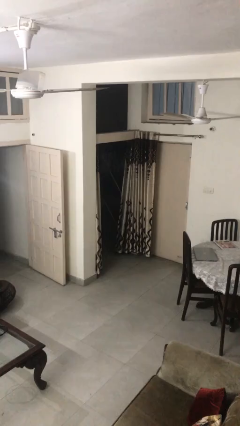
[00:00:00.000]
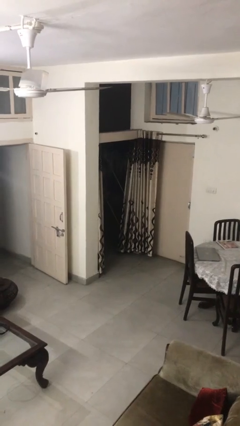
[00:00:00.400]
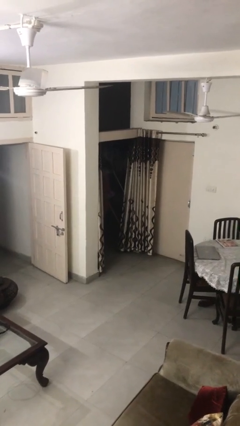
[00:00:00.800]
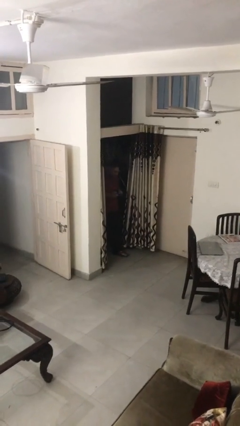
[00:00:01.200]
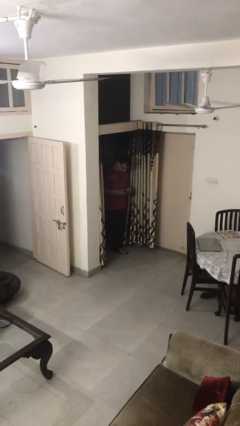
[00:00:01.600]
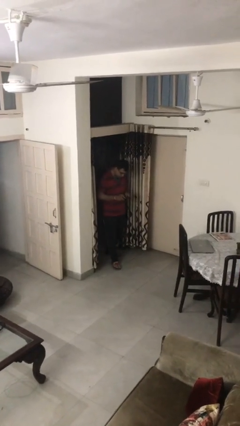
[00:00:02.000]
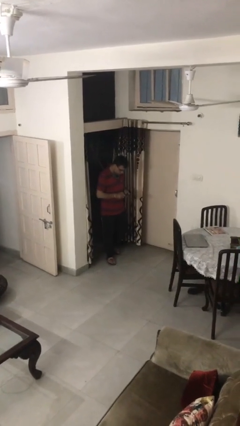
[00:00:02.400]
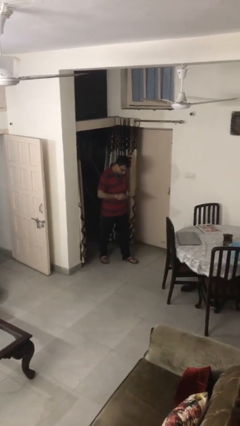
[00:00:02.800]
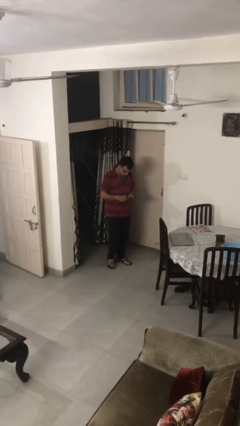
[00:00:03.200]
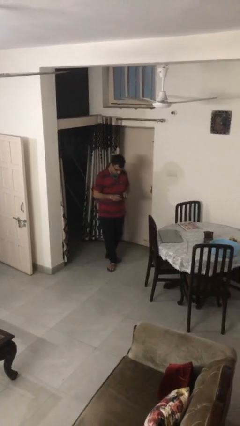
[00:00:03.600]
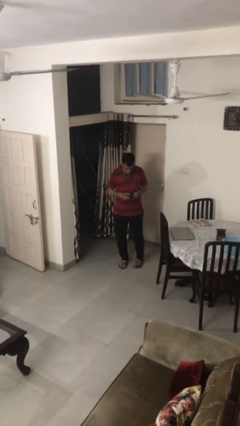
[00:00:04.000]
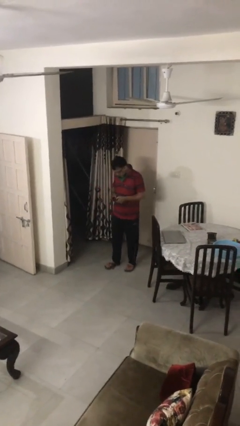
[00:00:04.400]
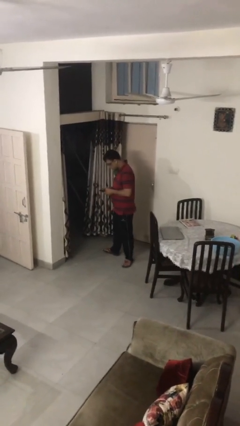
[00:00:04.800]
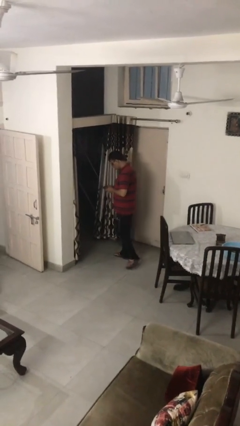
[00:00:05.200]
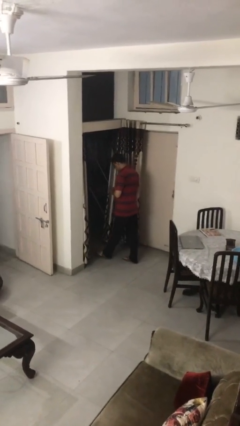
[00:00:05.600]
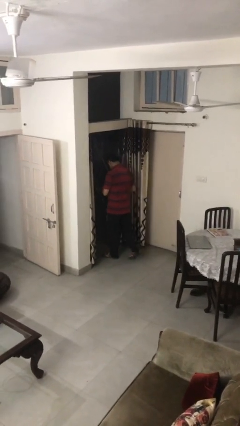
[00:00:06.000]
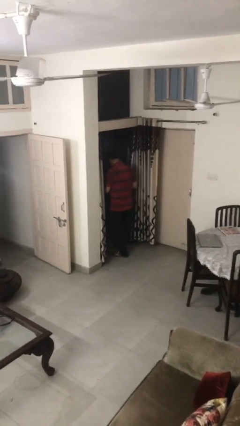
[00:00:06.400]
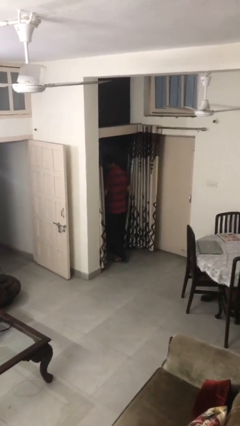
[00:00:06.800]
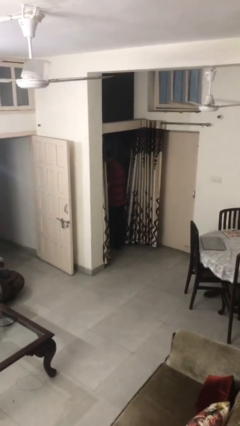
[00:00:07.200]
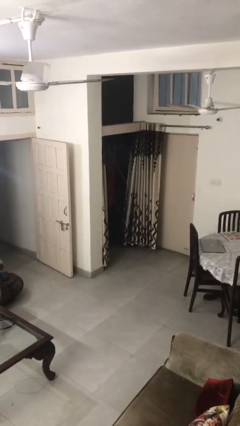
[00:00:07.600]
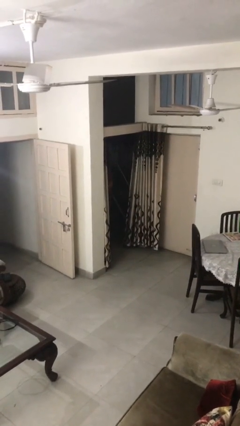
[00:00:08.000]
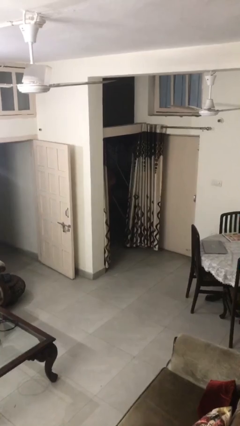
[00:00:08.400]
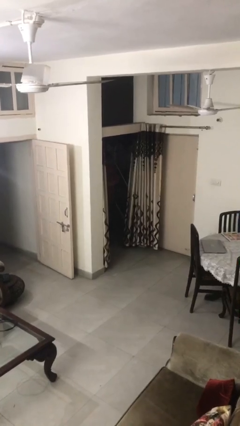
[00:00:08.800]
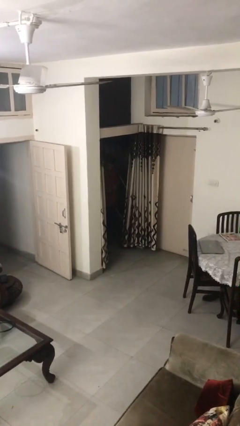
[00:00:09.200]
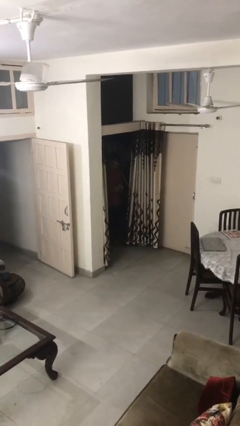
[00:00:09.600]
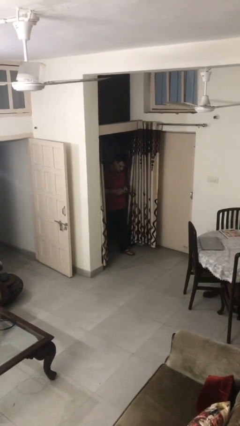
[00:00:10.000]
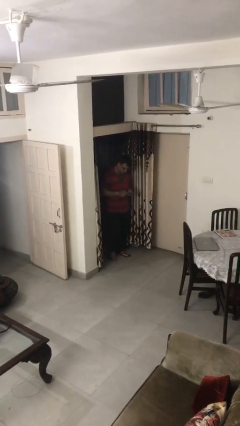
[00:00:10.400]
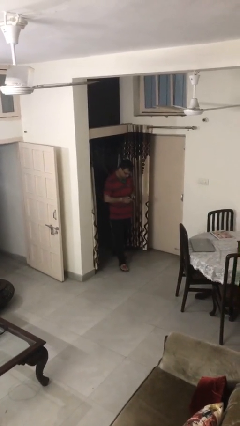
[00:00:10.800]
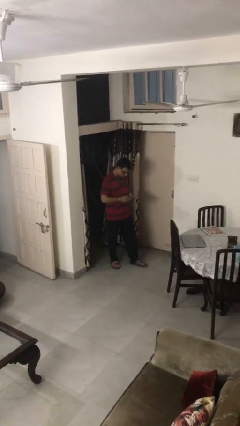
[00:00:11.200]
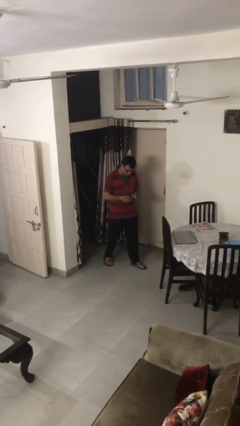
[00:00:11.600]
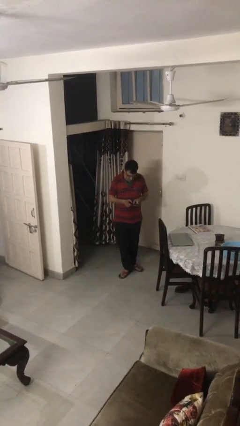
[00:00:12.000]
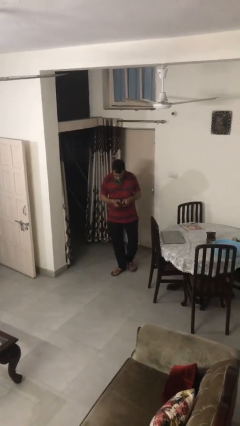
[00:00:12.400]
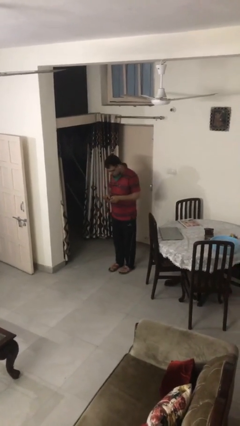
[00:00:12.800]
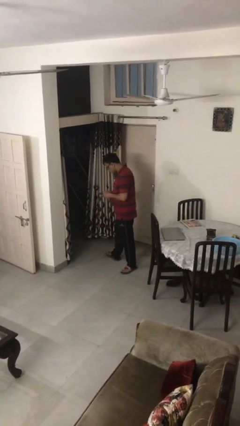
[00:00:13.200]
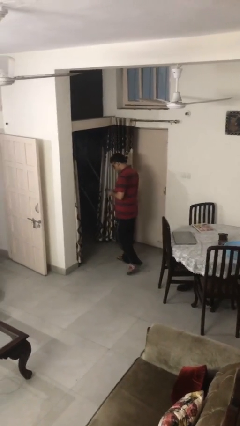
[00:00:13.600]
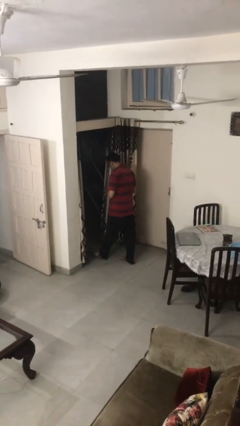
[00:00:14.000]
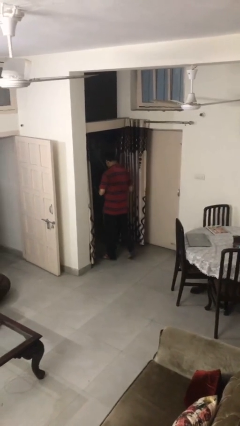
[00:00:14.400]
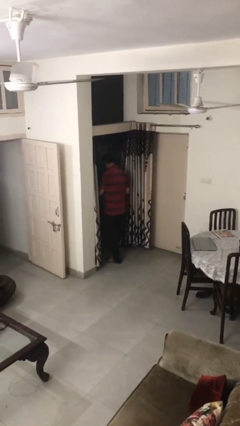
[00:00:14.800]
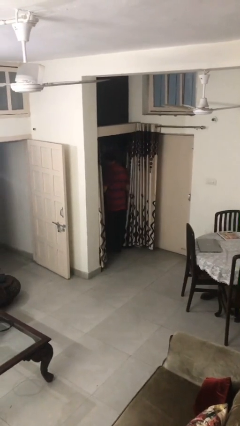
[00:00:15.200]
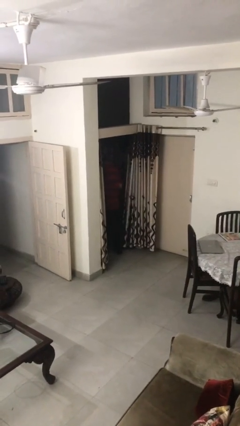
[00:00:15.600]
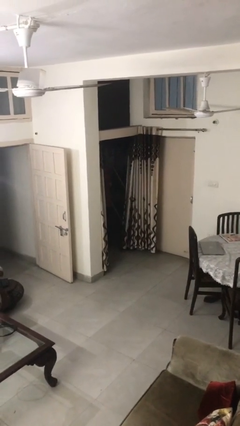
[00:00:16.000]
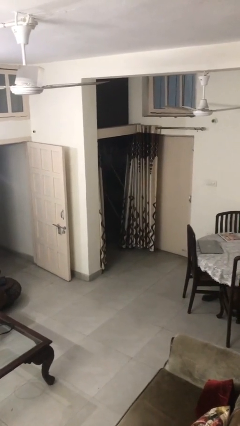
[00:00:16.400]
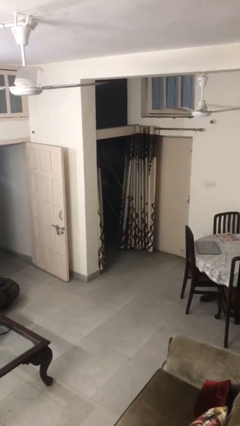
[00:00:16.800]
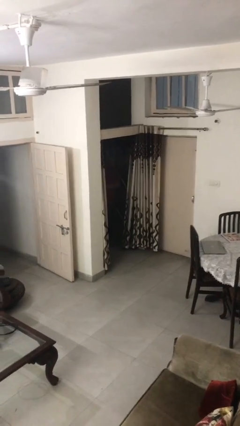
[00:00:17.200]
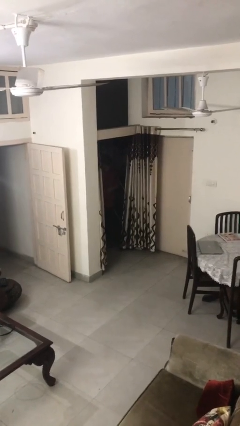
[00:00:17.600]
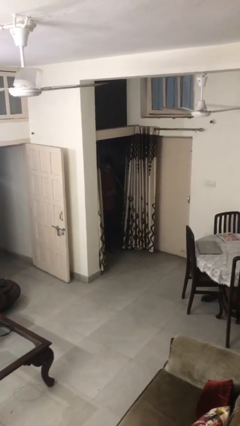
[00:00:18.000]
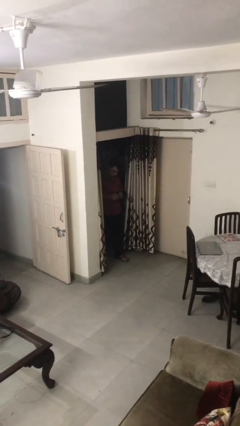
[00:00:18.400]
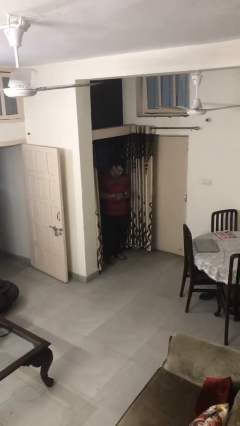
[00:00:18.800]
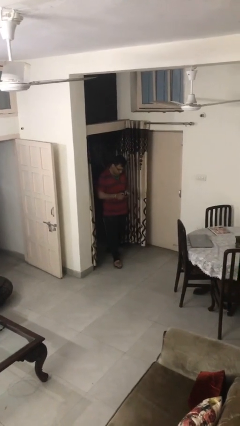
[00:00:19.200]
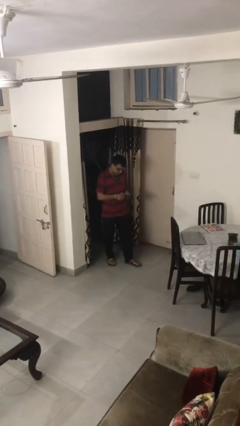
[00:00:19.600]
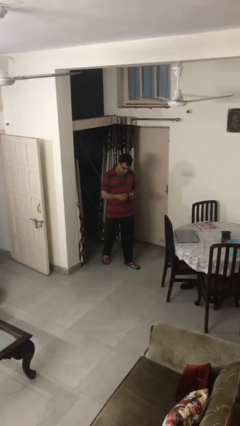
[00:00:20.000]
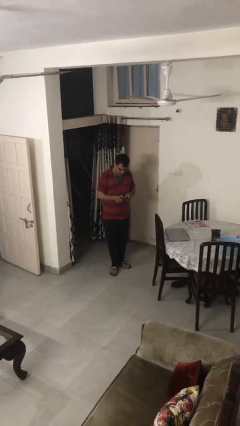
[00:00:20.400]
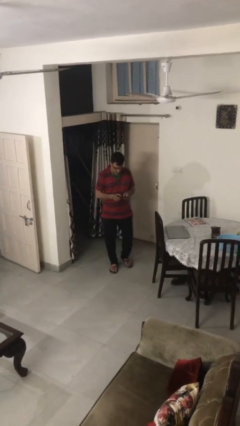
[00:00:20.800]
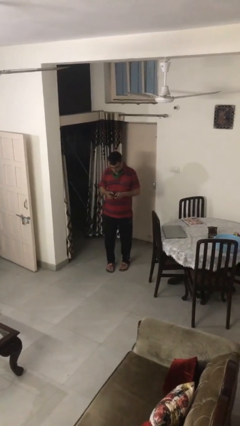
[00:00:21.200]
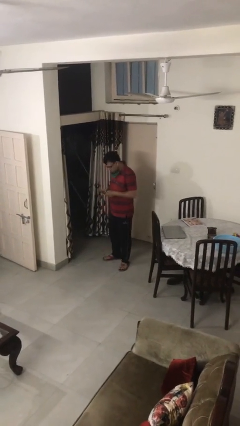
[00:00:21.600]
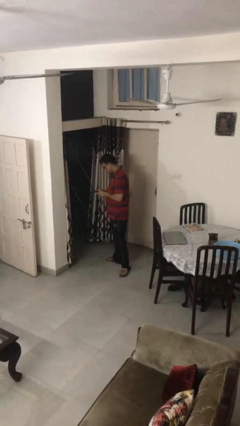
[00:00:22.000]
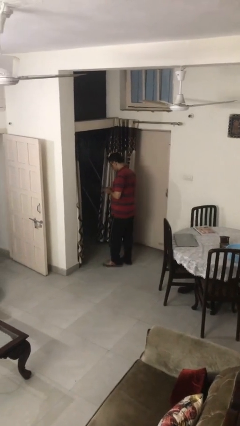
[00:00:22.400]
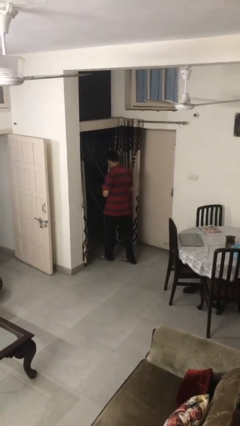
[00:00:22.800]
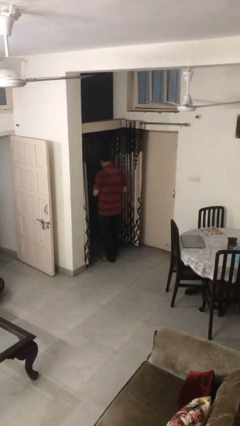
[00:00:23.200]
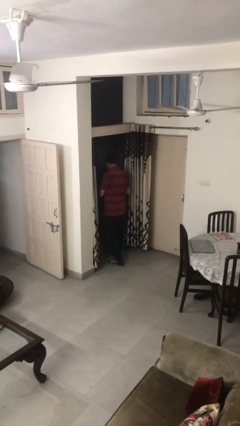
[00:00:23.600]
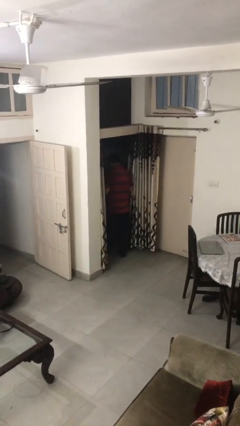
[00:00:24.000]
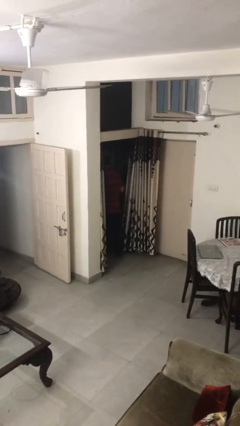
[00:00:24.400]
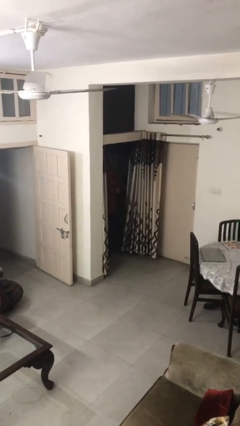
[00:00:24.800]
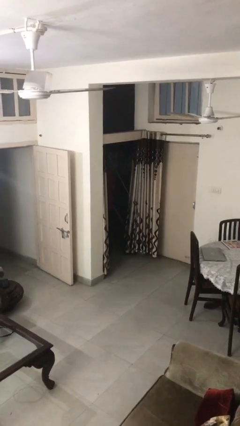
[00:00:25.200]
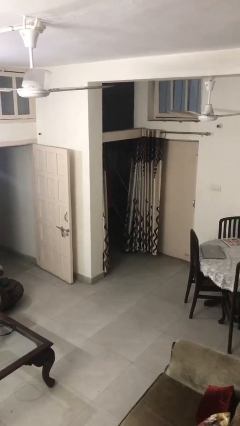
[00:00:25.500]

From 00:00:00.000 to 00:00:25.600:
person texts on phone

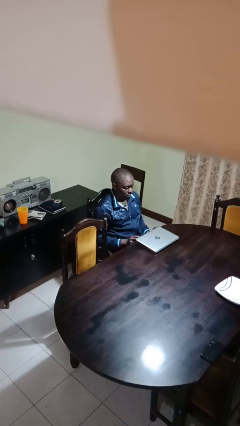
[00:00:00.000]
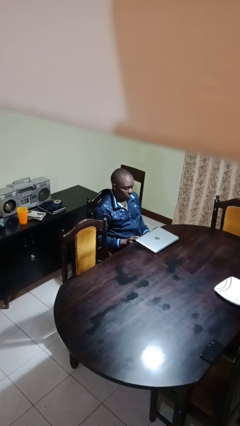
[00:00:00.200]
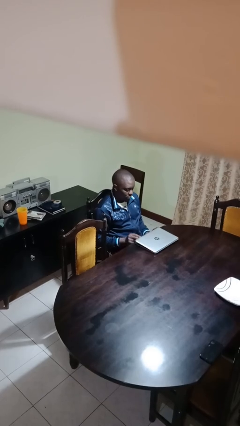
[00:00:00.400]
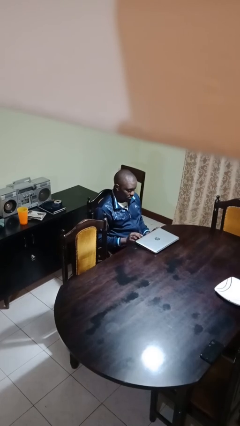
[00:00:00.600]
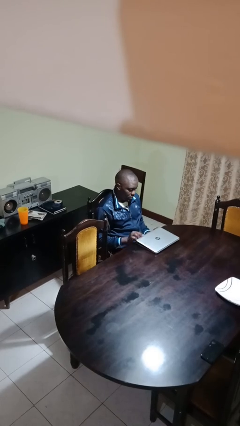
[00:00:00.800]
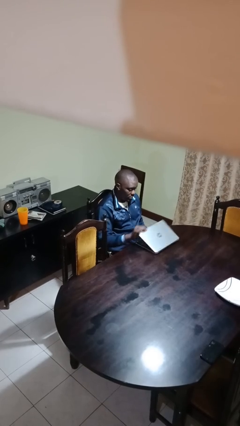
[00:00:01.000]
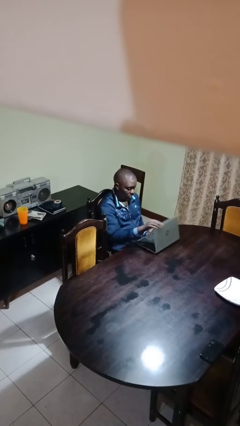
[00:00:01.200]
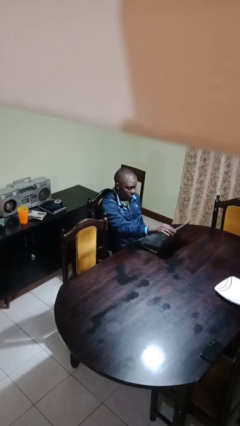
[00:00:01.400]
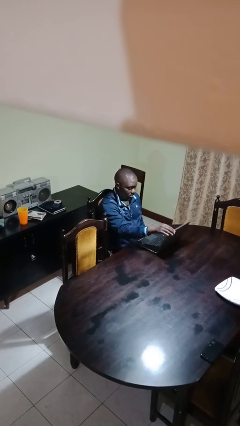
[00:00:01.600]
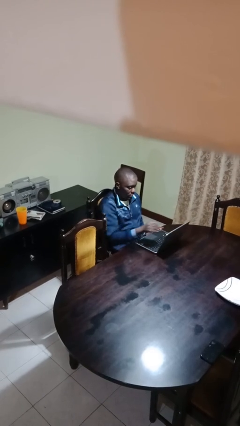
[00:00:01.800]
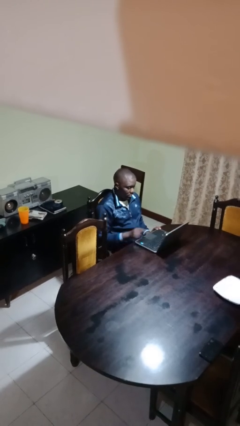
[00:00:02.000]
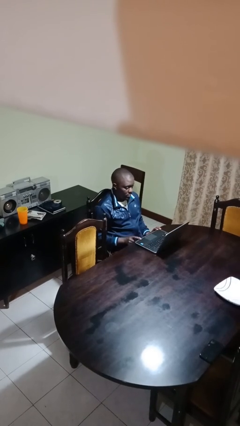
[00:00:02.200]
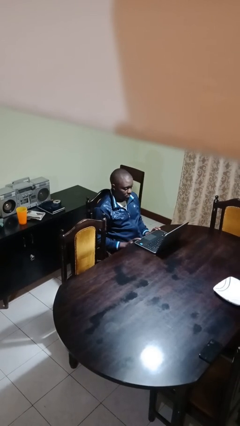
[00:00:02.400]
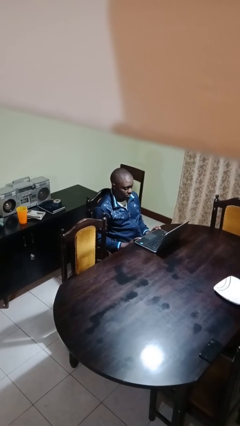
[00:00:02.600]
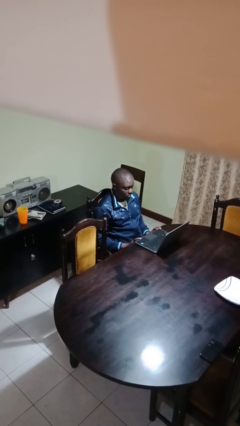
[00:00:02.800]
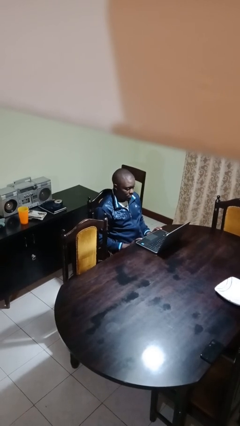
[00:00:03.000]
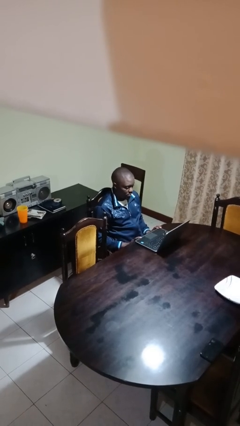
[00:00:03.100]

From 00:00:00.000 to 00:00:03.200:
person opens laptop

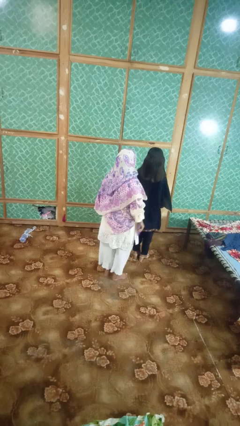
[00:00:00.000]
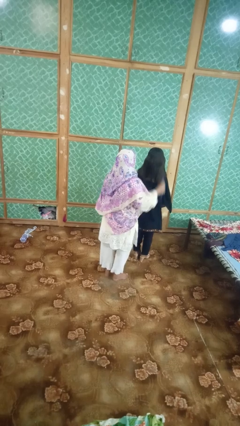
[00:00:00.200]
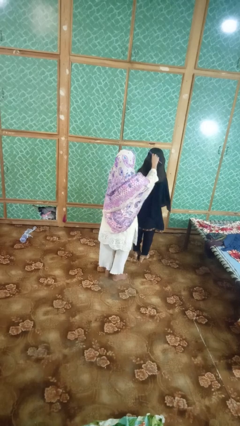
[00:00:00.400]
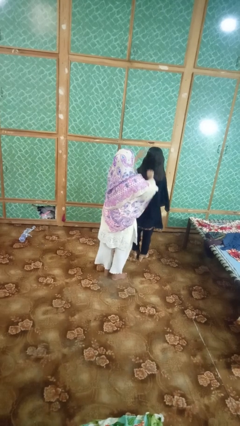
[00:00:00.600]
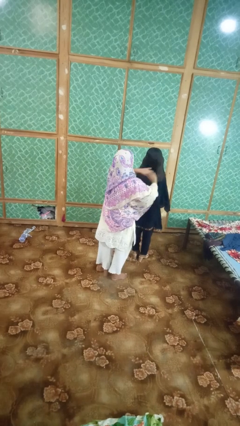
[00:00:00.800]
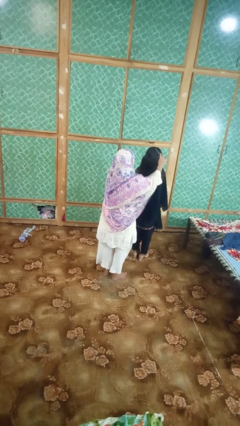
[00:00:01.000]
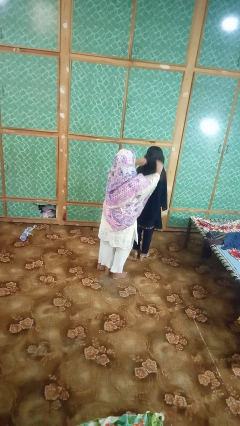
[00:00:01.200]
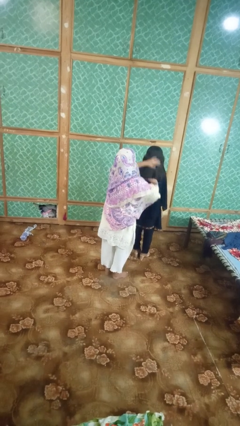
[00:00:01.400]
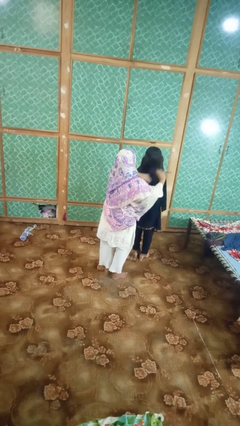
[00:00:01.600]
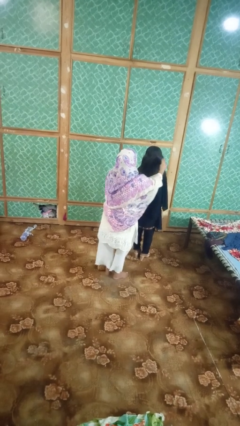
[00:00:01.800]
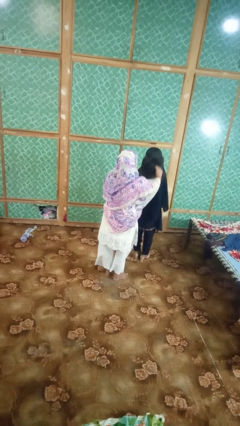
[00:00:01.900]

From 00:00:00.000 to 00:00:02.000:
person brushes hair of person
